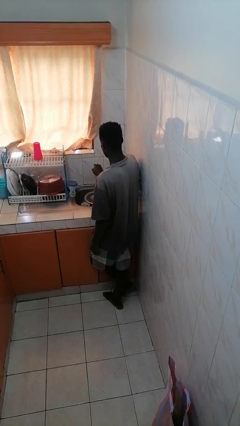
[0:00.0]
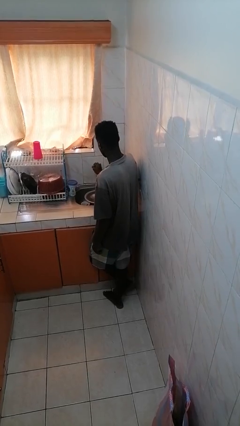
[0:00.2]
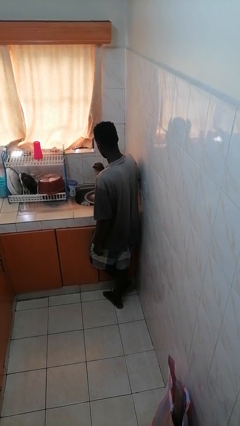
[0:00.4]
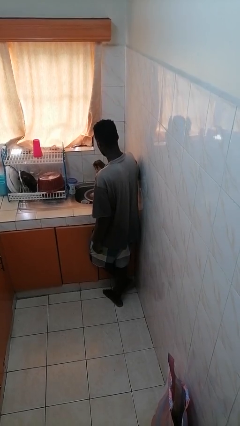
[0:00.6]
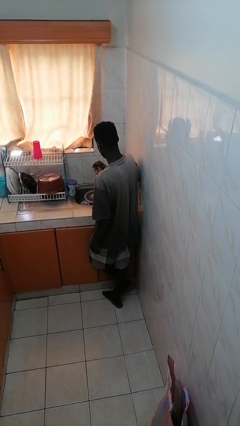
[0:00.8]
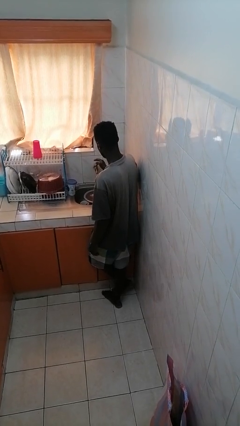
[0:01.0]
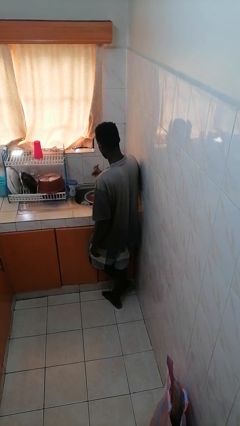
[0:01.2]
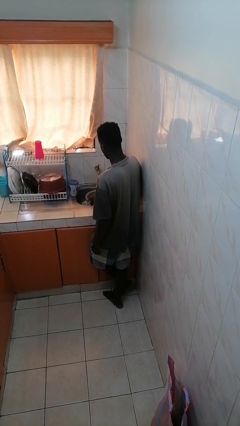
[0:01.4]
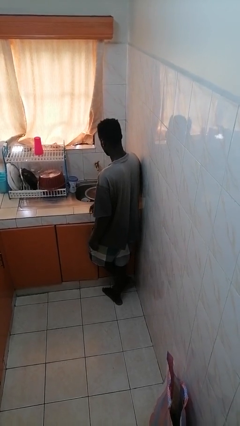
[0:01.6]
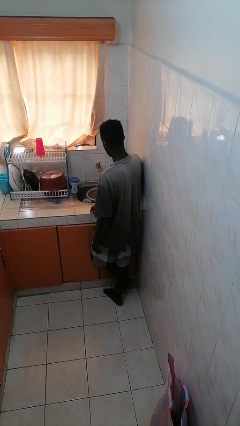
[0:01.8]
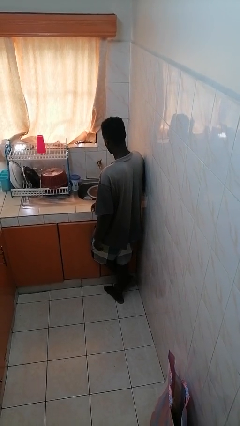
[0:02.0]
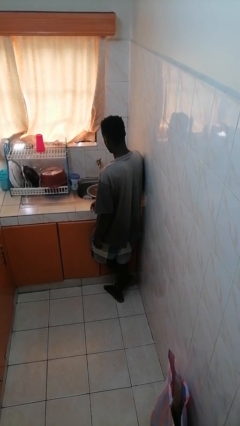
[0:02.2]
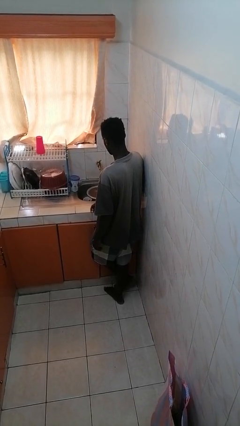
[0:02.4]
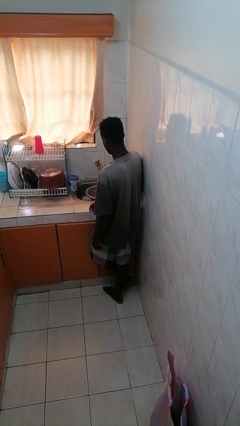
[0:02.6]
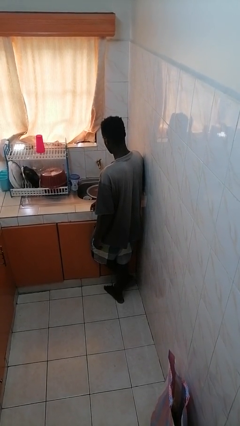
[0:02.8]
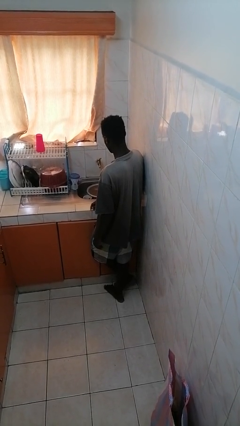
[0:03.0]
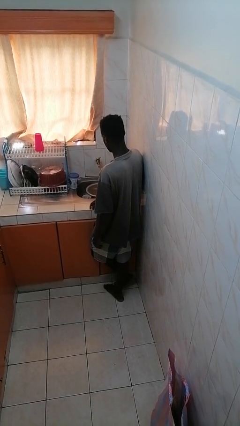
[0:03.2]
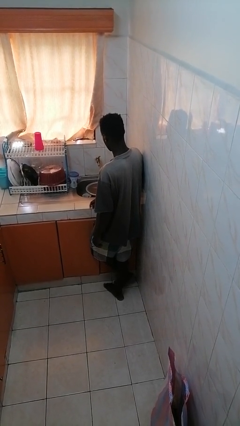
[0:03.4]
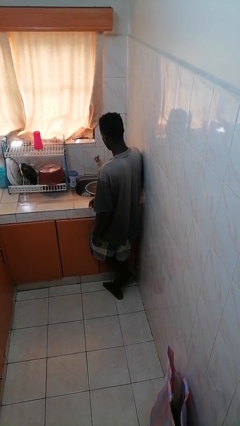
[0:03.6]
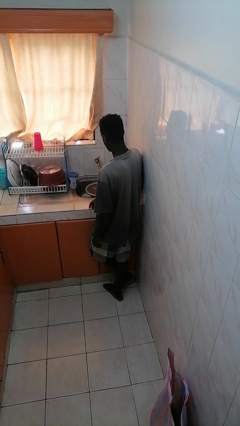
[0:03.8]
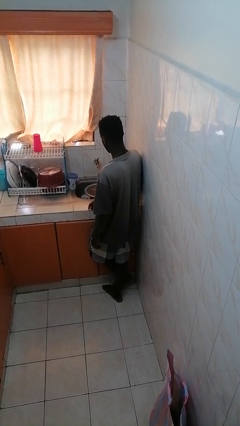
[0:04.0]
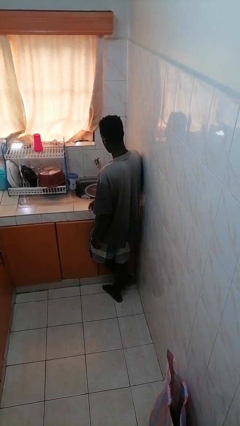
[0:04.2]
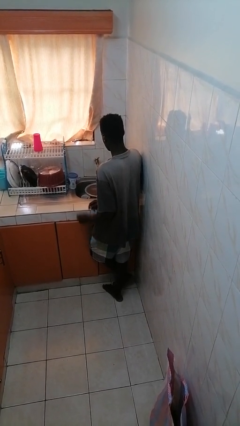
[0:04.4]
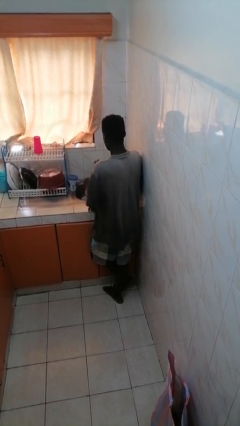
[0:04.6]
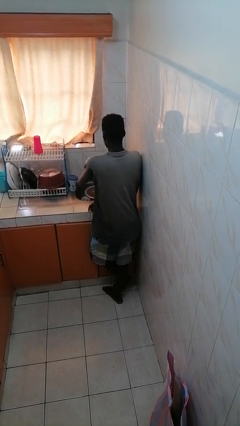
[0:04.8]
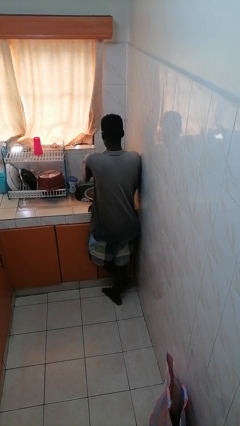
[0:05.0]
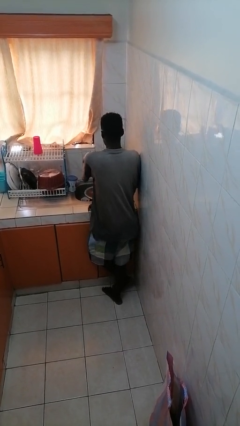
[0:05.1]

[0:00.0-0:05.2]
person turns on faucet

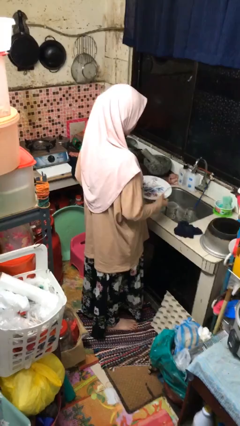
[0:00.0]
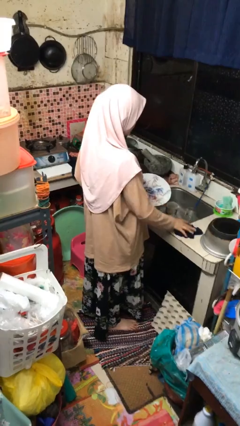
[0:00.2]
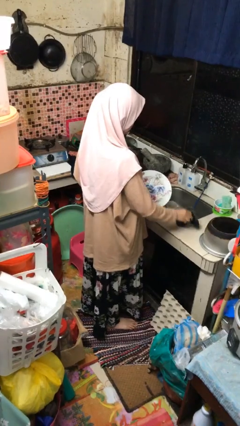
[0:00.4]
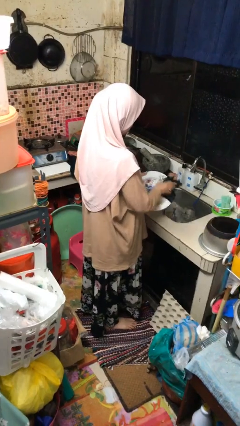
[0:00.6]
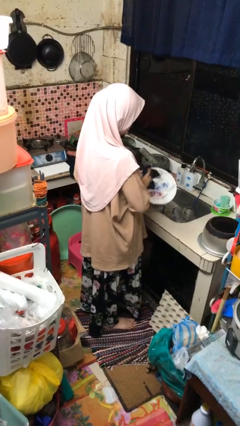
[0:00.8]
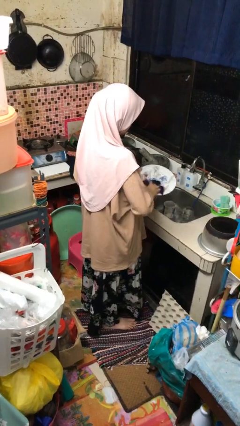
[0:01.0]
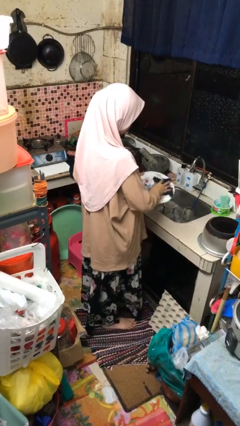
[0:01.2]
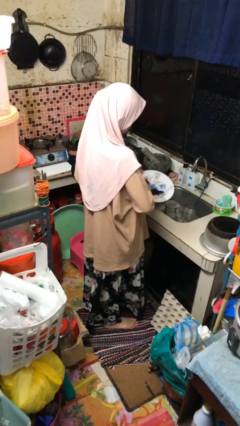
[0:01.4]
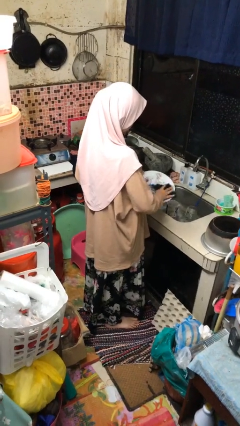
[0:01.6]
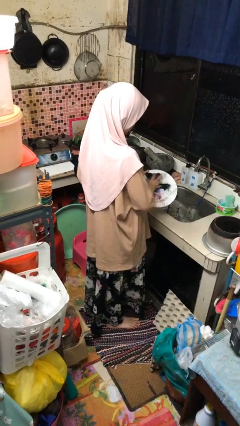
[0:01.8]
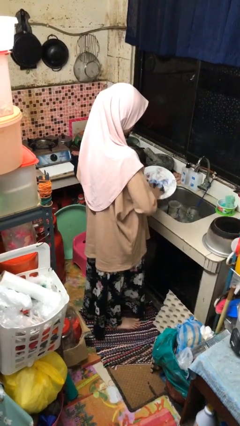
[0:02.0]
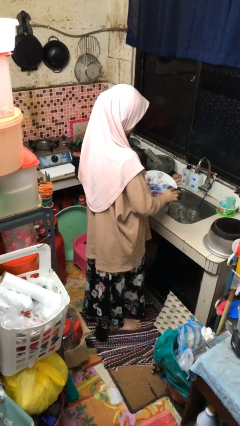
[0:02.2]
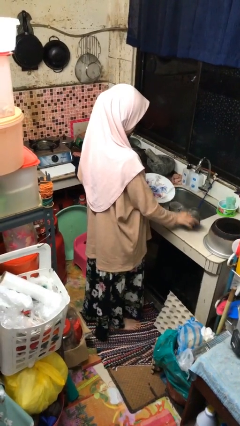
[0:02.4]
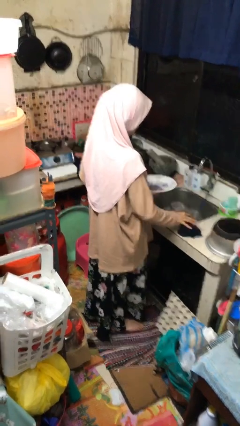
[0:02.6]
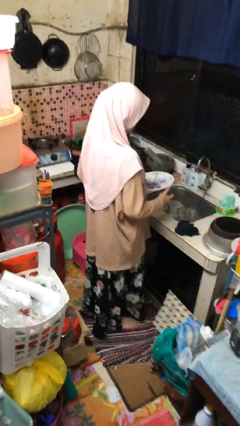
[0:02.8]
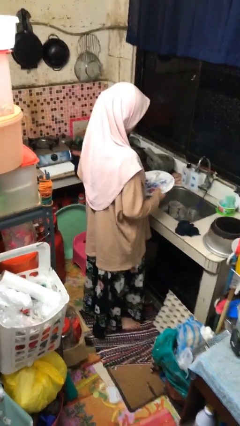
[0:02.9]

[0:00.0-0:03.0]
person dries dish

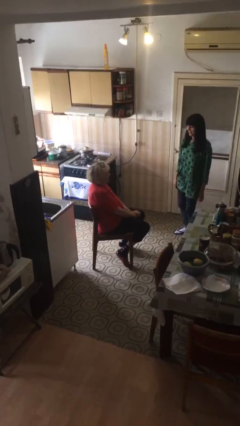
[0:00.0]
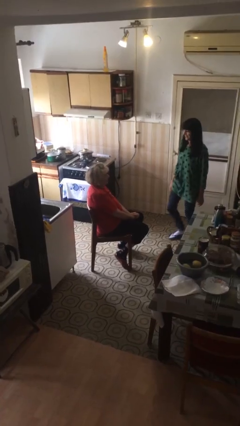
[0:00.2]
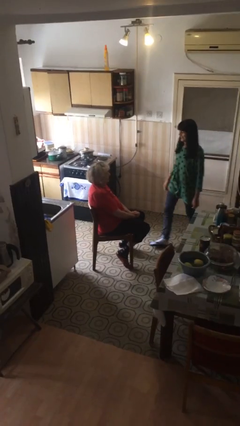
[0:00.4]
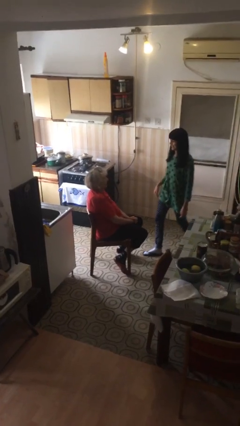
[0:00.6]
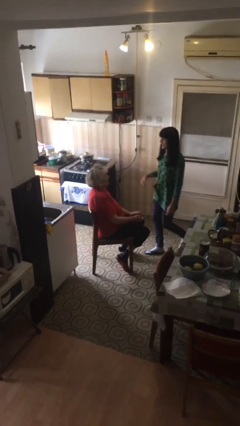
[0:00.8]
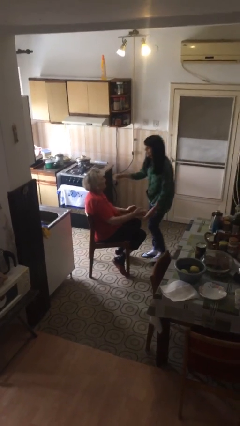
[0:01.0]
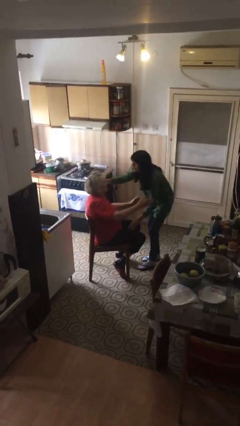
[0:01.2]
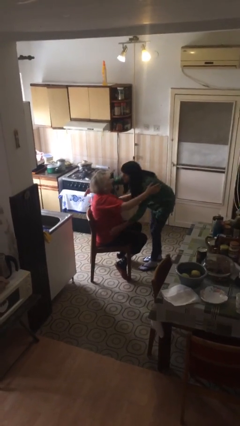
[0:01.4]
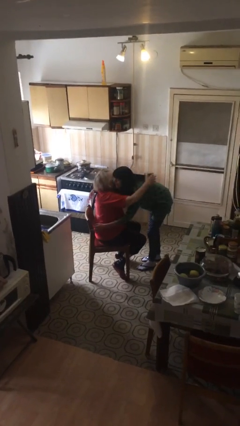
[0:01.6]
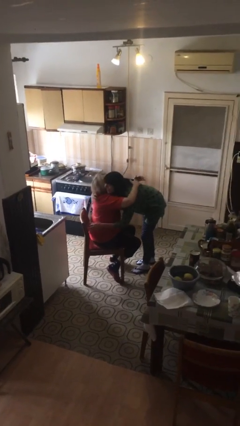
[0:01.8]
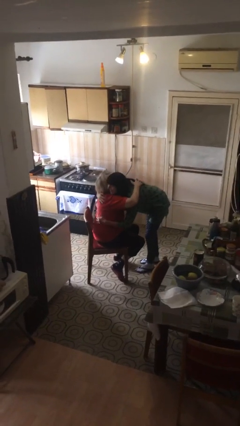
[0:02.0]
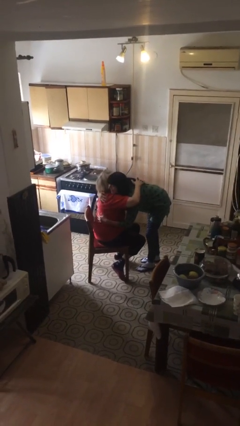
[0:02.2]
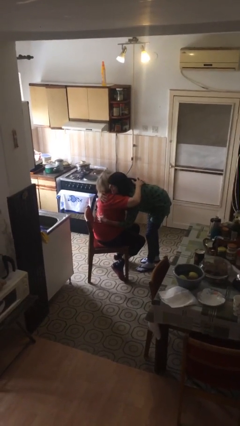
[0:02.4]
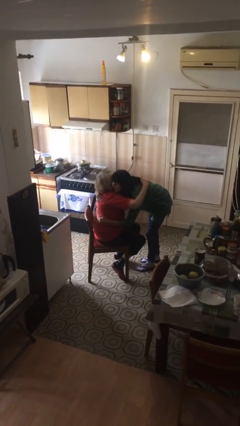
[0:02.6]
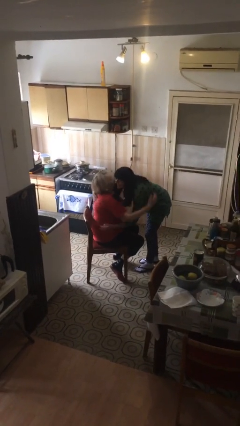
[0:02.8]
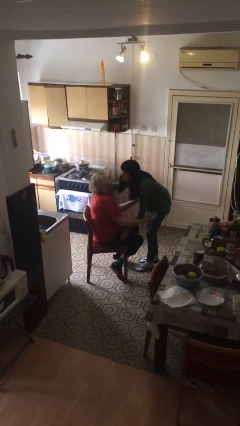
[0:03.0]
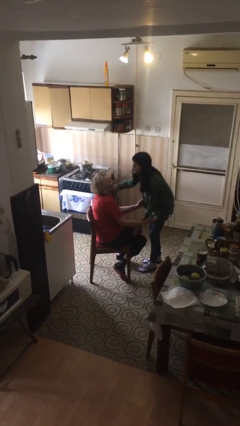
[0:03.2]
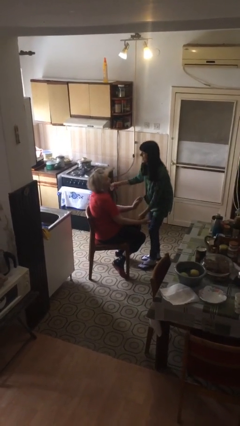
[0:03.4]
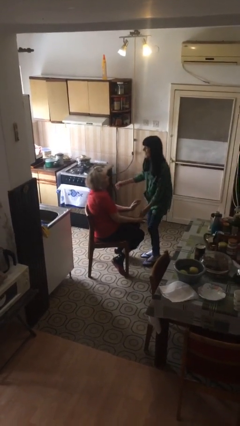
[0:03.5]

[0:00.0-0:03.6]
person embraces person

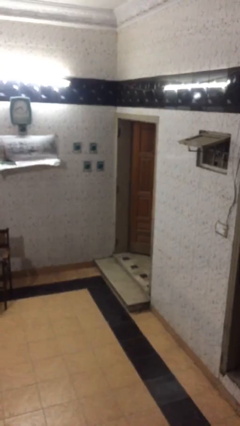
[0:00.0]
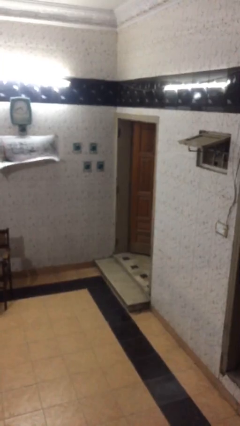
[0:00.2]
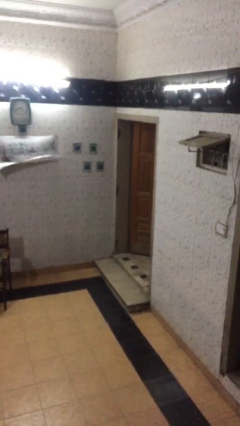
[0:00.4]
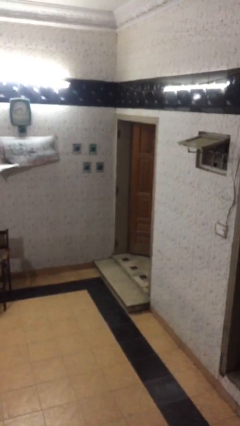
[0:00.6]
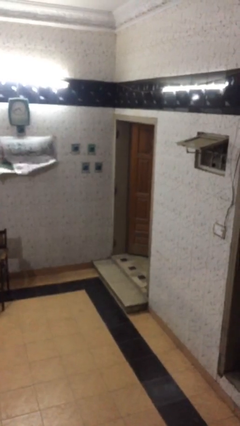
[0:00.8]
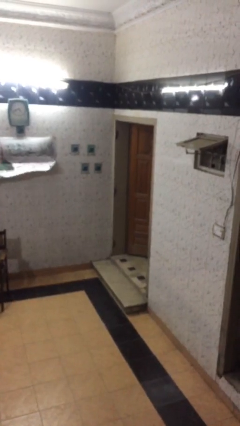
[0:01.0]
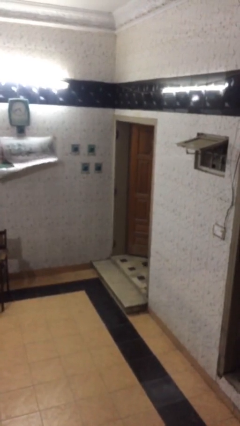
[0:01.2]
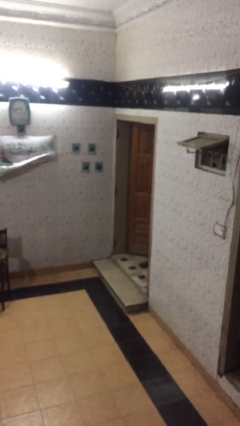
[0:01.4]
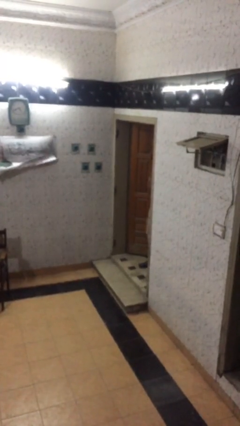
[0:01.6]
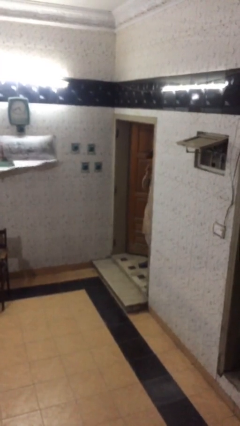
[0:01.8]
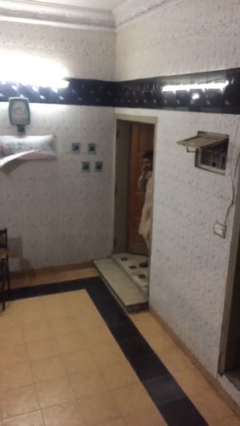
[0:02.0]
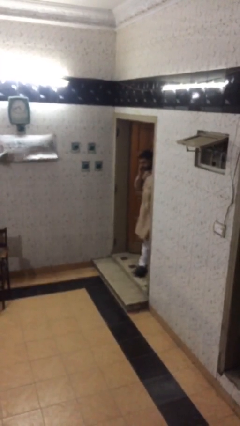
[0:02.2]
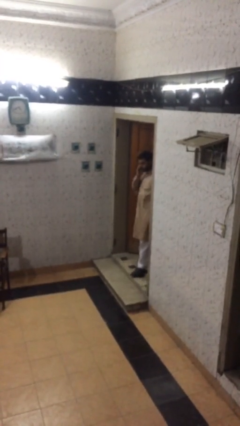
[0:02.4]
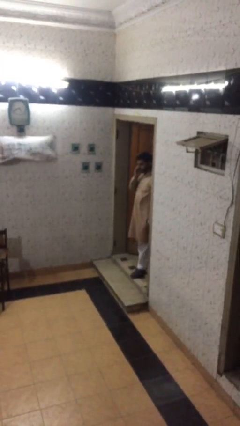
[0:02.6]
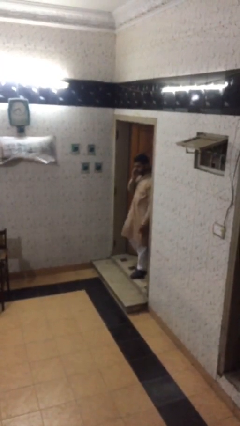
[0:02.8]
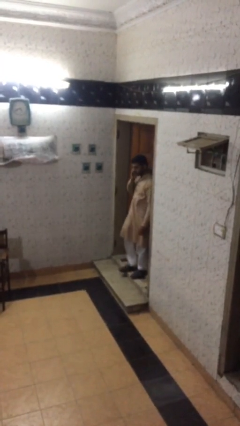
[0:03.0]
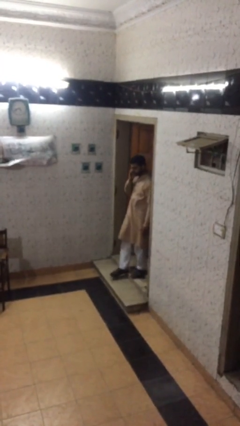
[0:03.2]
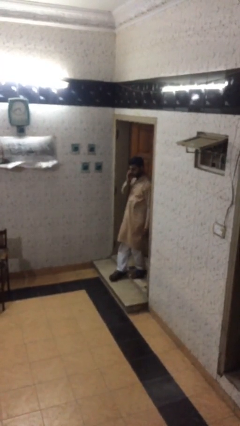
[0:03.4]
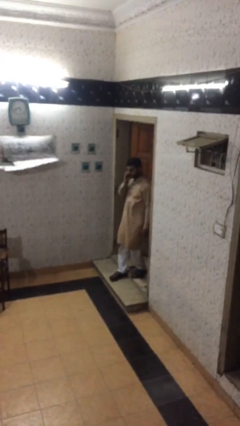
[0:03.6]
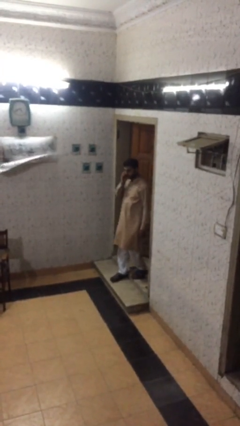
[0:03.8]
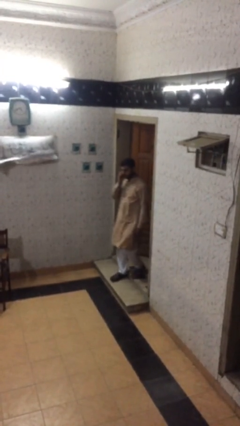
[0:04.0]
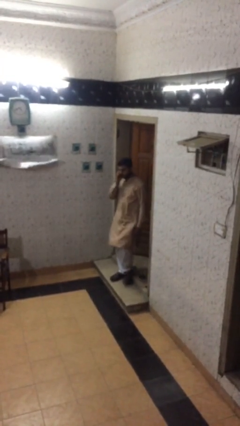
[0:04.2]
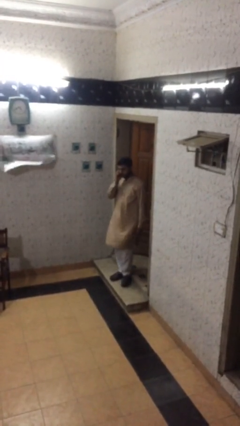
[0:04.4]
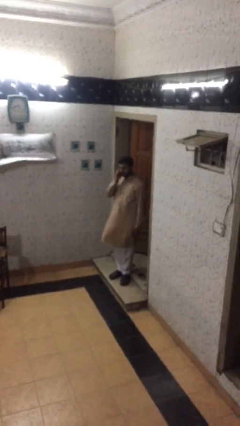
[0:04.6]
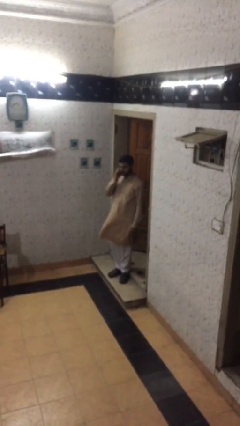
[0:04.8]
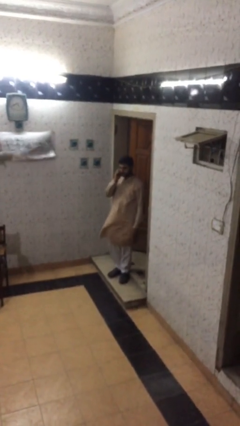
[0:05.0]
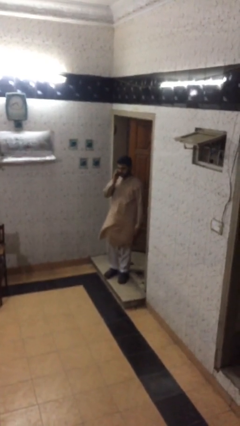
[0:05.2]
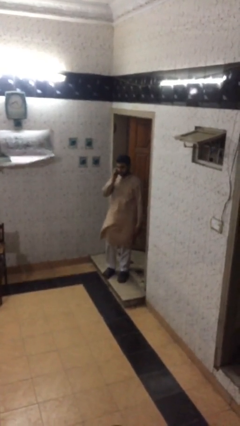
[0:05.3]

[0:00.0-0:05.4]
person enters scene through structure

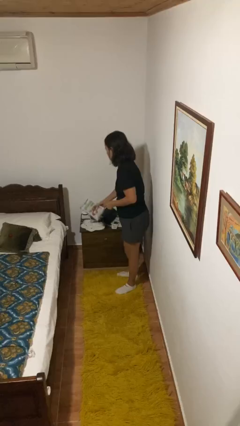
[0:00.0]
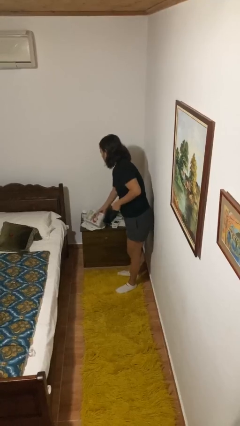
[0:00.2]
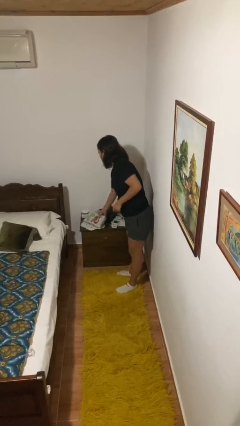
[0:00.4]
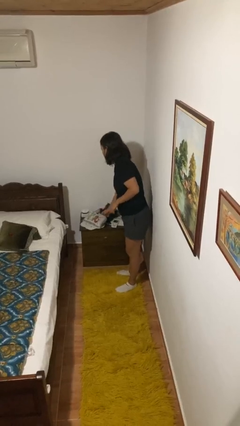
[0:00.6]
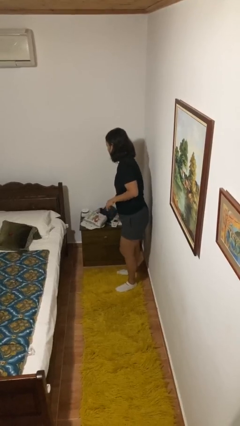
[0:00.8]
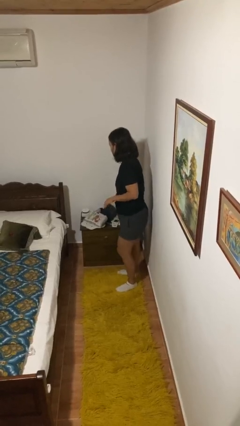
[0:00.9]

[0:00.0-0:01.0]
person puts down object on countertop
